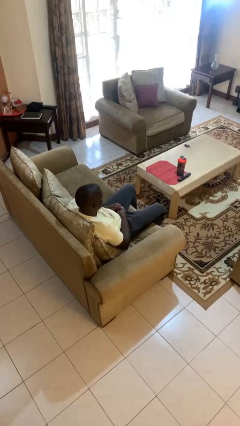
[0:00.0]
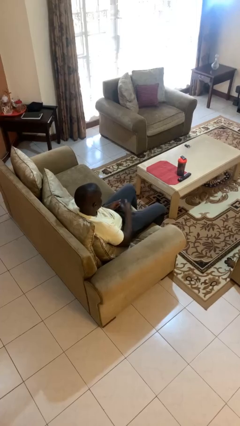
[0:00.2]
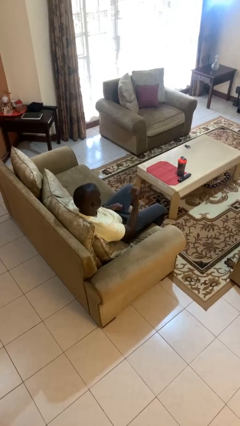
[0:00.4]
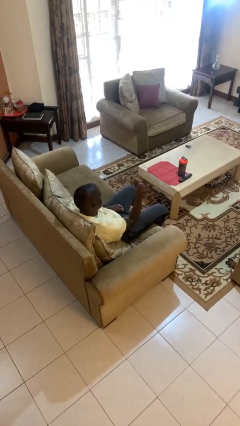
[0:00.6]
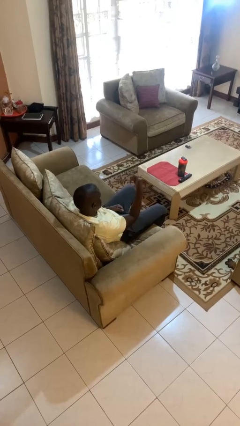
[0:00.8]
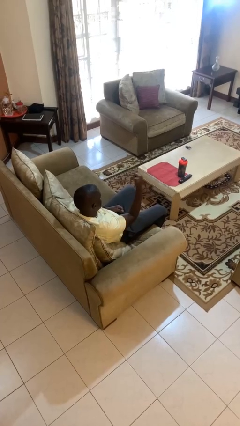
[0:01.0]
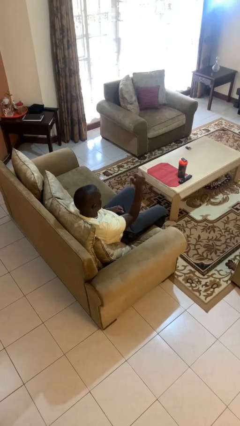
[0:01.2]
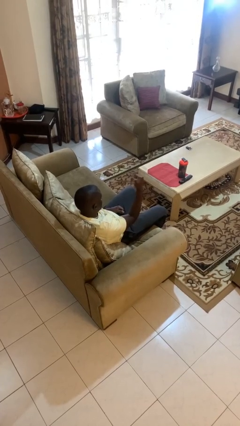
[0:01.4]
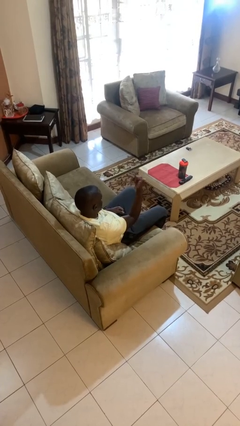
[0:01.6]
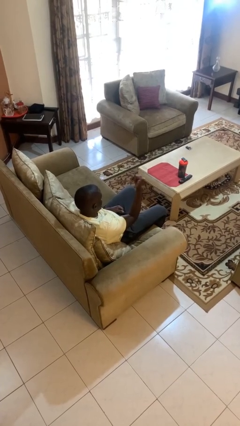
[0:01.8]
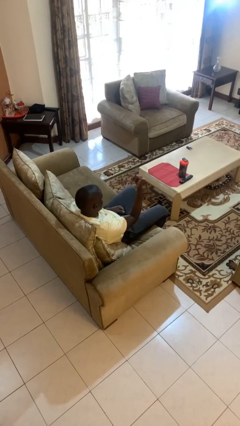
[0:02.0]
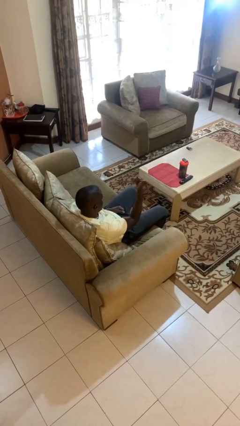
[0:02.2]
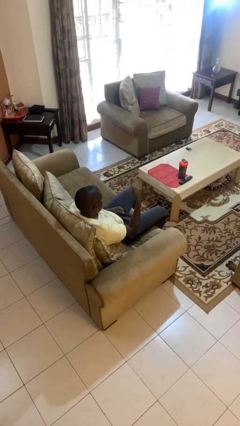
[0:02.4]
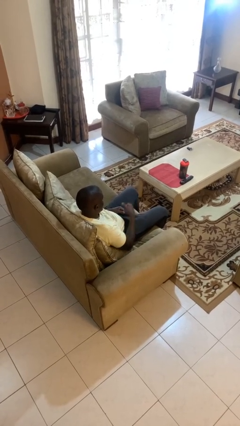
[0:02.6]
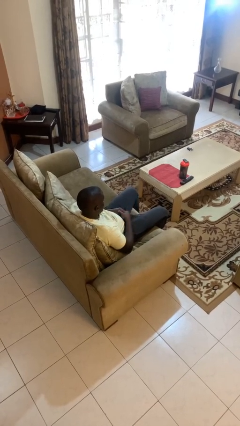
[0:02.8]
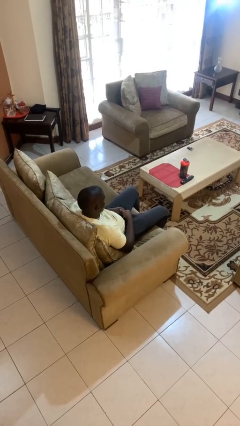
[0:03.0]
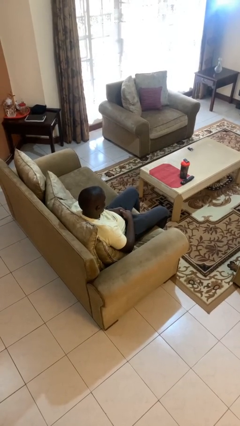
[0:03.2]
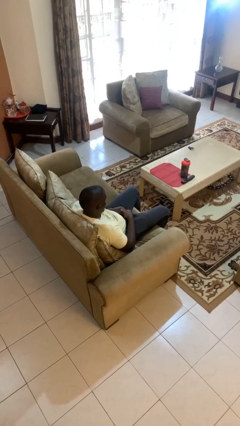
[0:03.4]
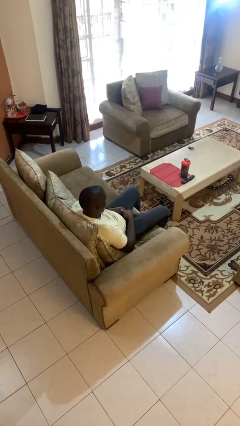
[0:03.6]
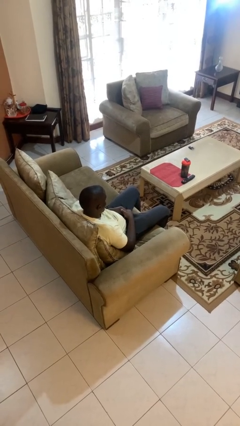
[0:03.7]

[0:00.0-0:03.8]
person gestures hang loose

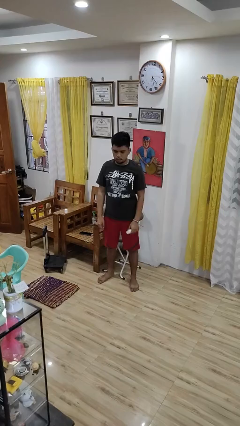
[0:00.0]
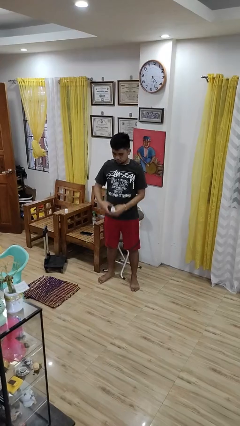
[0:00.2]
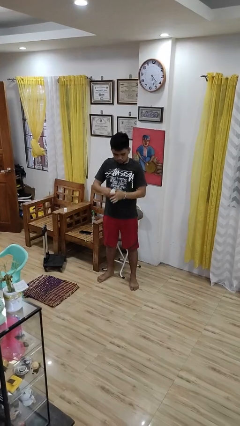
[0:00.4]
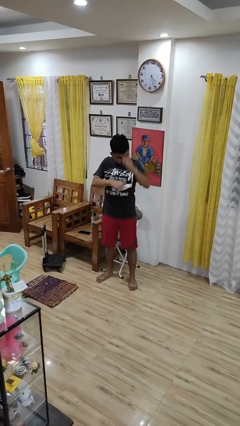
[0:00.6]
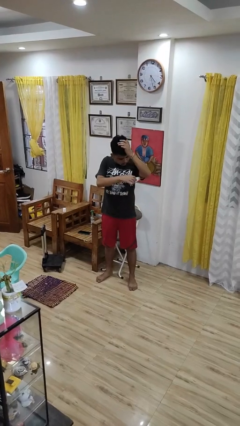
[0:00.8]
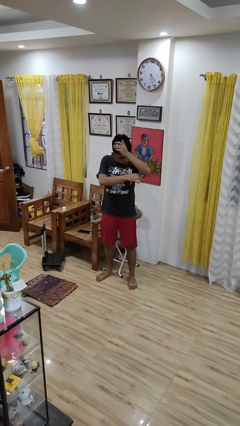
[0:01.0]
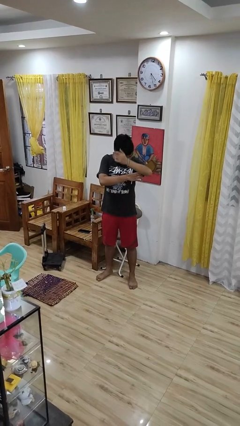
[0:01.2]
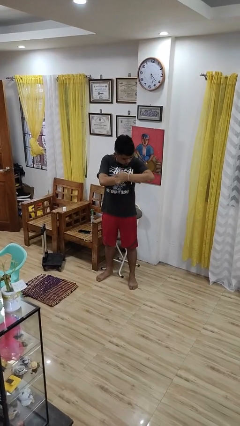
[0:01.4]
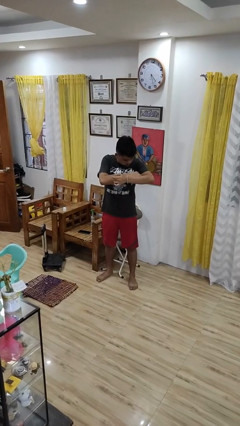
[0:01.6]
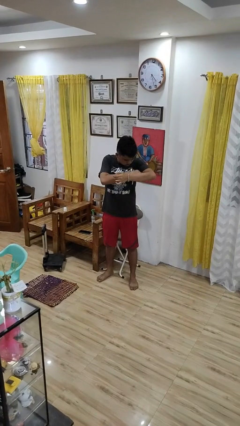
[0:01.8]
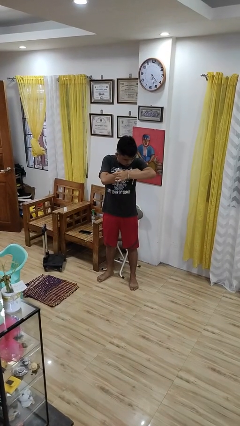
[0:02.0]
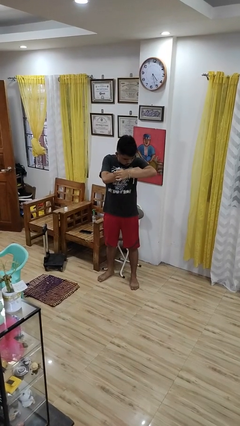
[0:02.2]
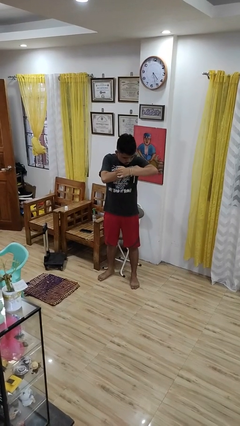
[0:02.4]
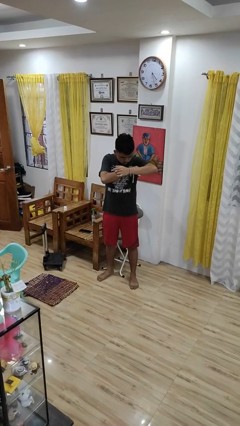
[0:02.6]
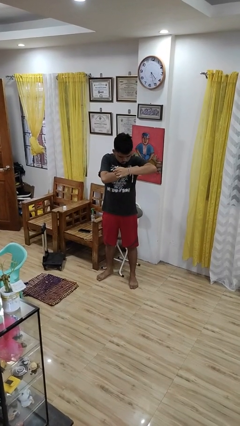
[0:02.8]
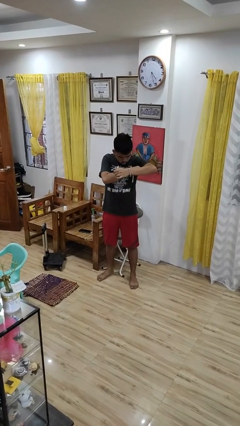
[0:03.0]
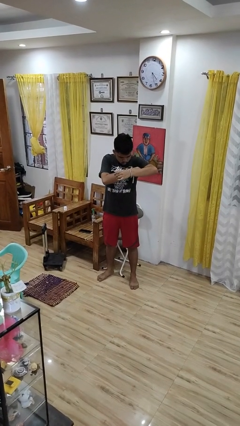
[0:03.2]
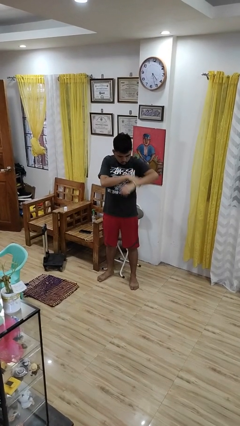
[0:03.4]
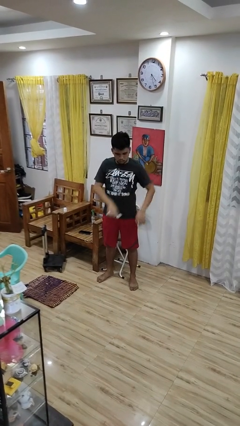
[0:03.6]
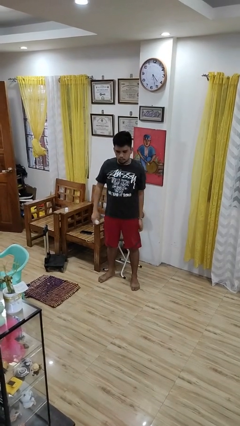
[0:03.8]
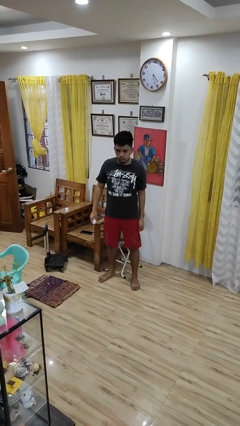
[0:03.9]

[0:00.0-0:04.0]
person applies deodorant

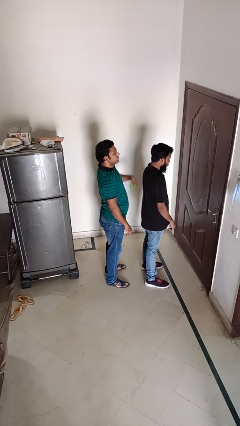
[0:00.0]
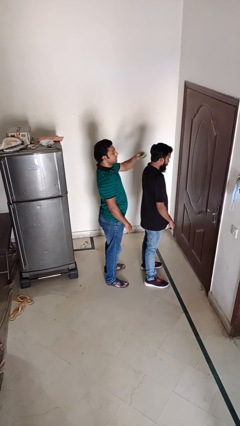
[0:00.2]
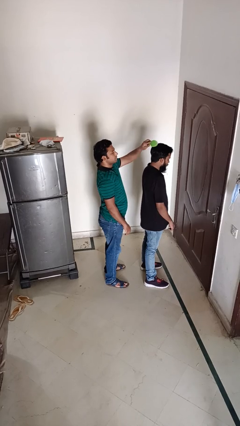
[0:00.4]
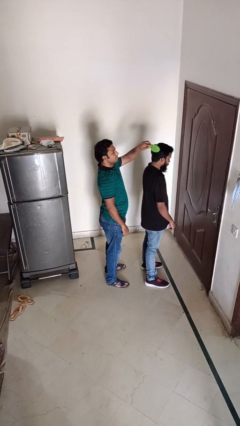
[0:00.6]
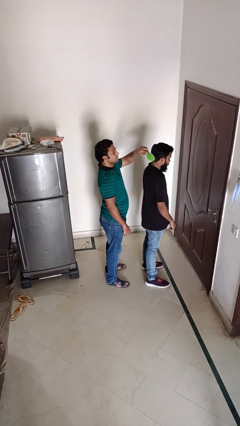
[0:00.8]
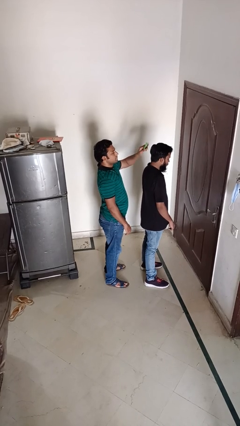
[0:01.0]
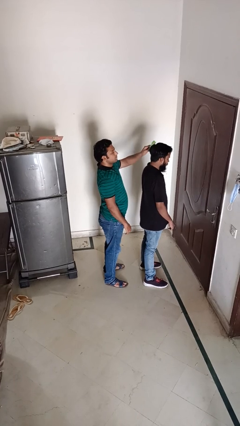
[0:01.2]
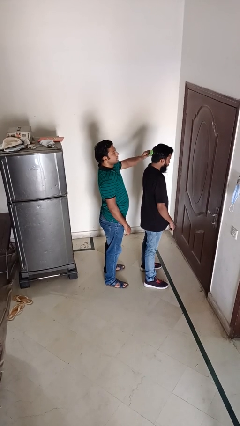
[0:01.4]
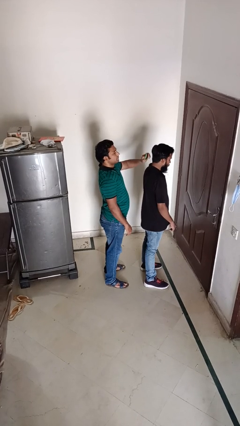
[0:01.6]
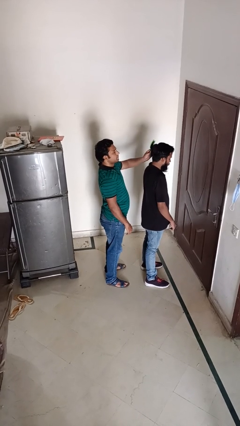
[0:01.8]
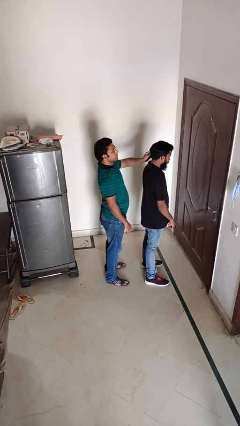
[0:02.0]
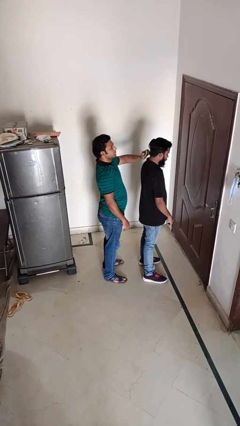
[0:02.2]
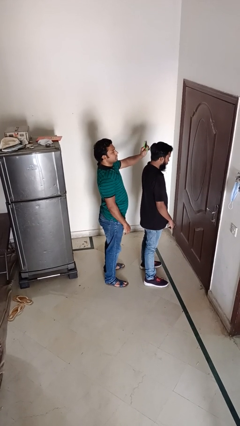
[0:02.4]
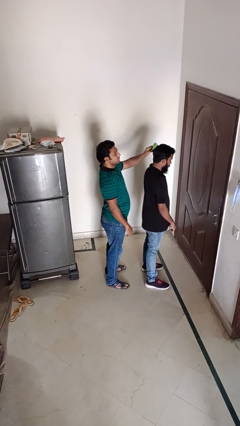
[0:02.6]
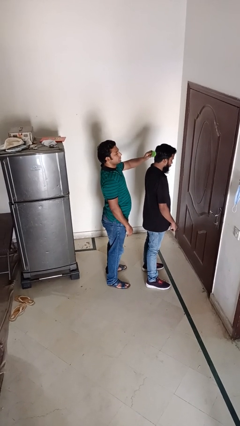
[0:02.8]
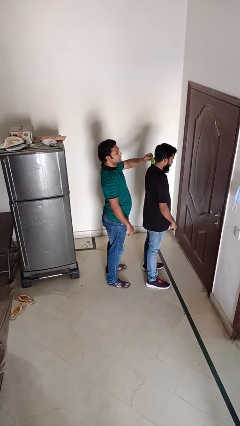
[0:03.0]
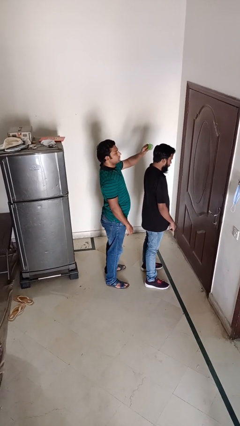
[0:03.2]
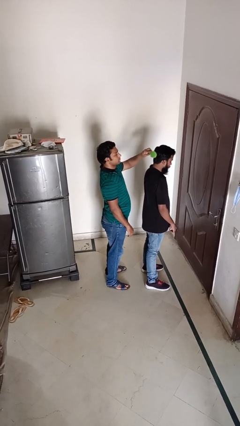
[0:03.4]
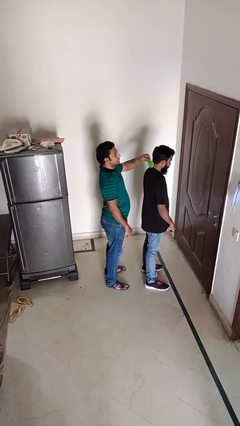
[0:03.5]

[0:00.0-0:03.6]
person brushes hair of person

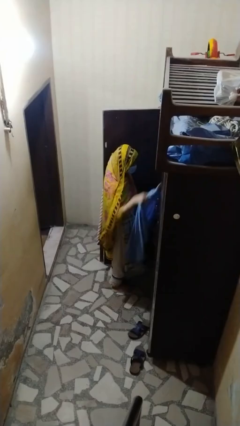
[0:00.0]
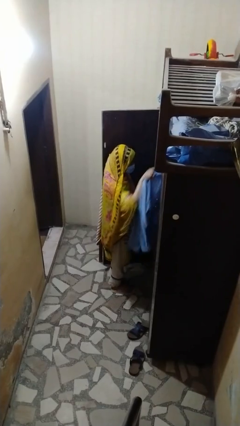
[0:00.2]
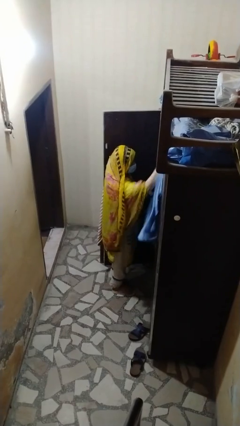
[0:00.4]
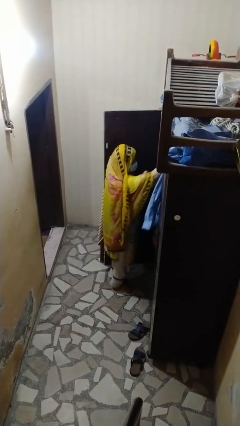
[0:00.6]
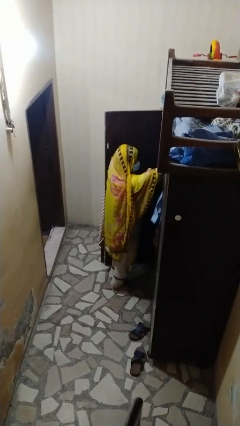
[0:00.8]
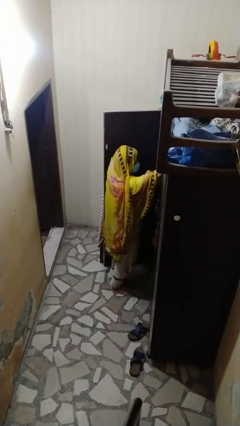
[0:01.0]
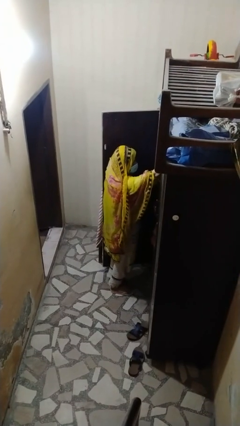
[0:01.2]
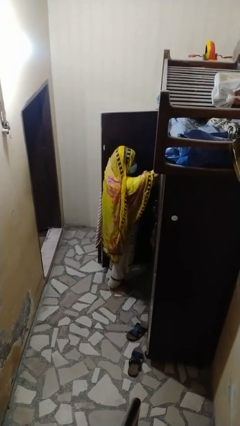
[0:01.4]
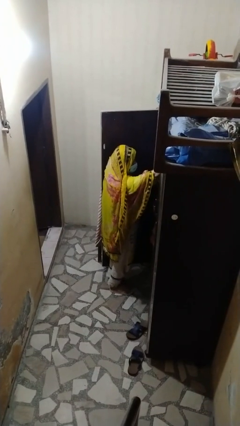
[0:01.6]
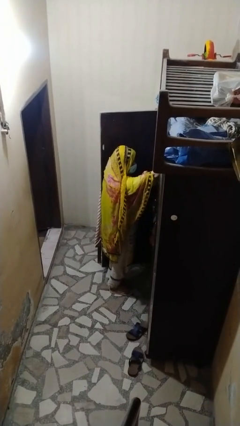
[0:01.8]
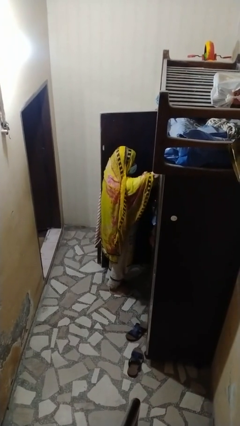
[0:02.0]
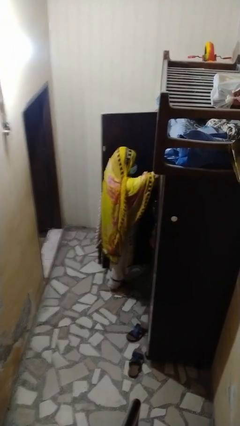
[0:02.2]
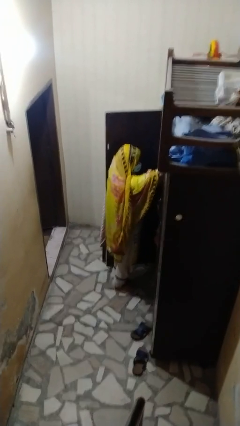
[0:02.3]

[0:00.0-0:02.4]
person puts clothes into closet

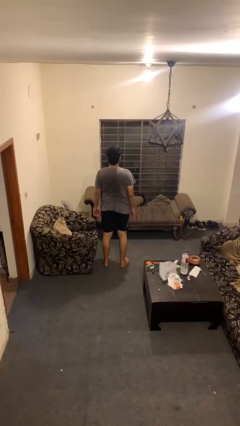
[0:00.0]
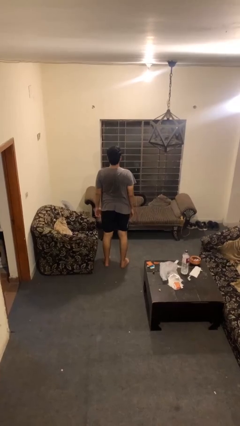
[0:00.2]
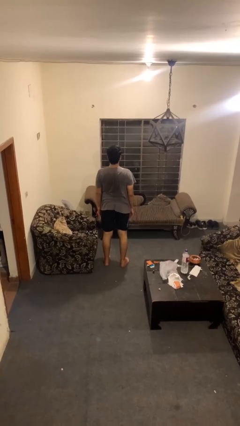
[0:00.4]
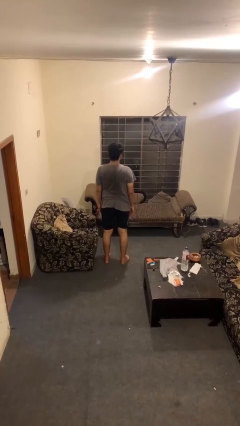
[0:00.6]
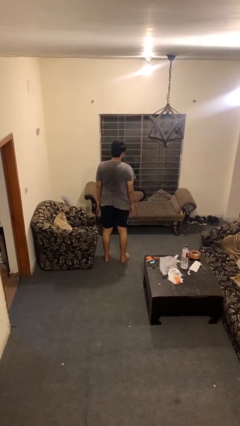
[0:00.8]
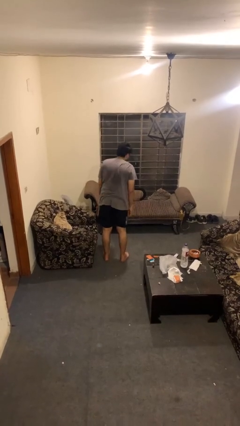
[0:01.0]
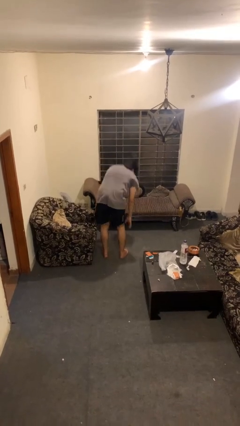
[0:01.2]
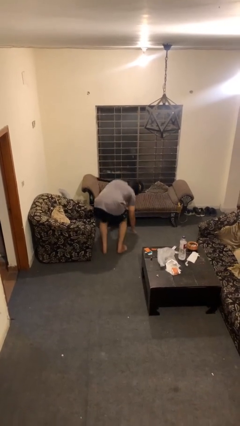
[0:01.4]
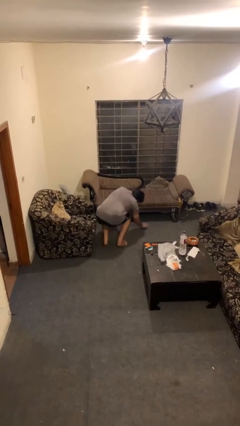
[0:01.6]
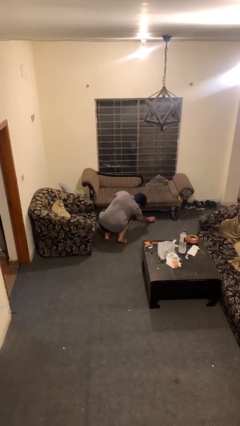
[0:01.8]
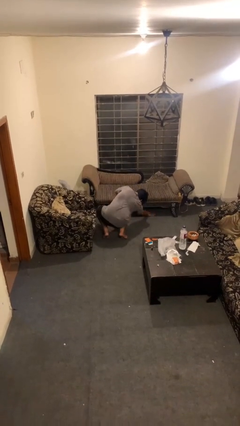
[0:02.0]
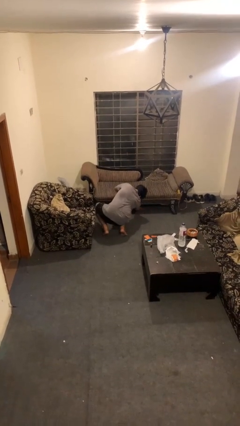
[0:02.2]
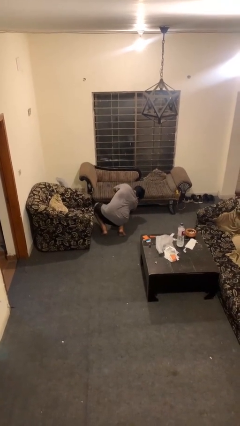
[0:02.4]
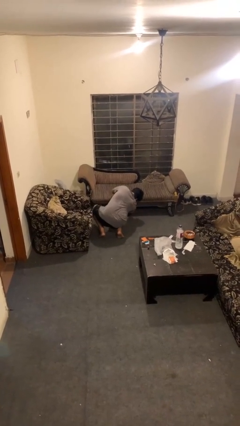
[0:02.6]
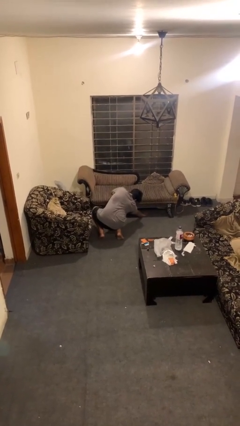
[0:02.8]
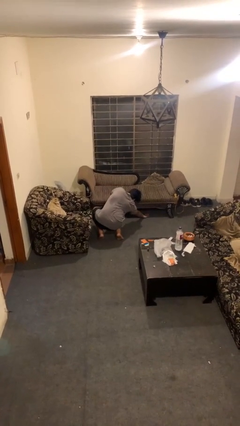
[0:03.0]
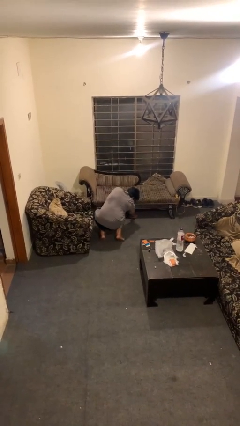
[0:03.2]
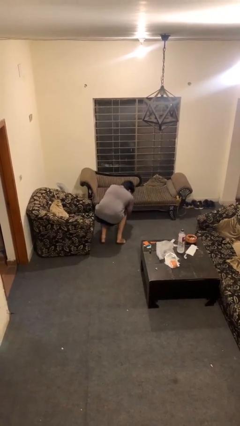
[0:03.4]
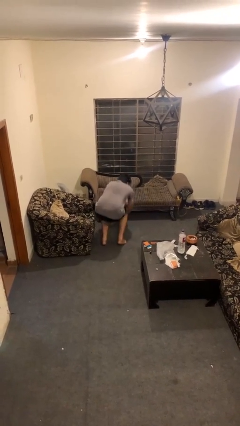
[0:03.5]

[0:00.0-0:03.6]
person searches under couch
